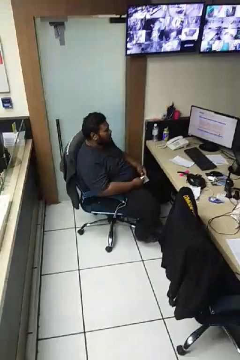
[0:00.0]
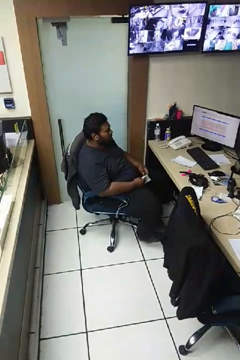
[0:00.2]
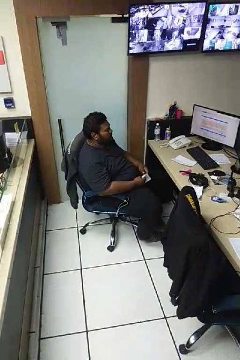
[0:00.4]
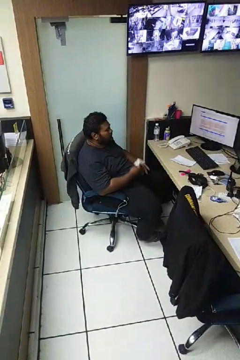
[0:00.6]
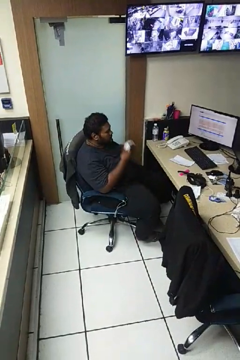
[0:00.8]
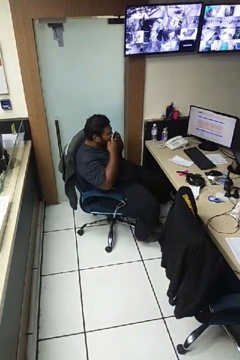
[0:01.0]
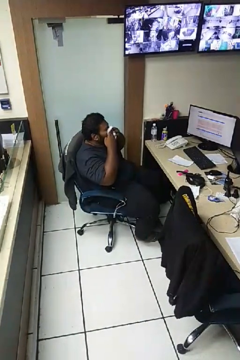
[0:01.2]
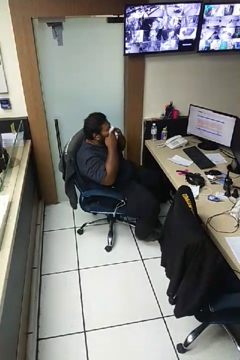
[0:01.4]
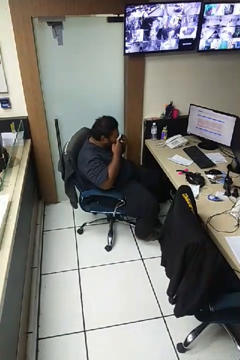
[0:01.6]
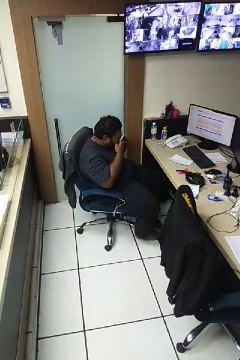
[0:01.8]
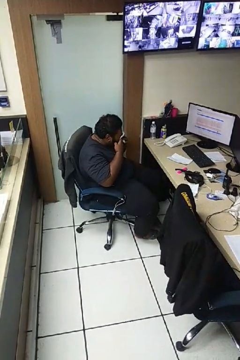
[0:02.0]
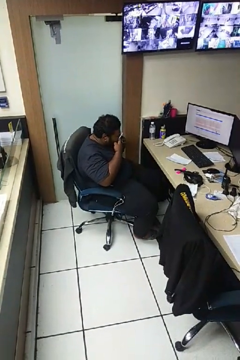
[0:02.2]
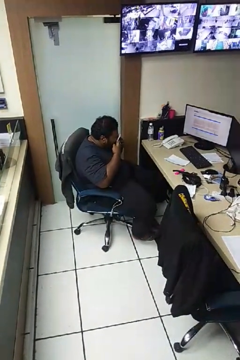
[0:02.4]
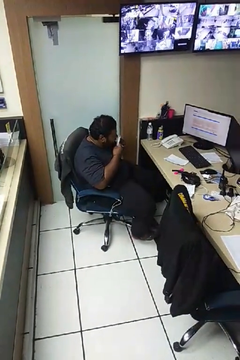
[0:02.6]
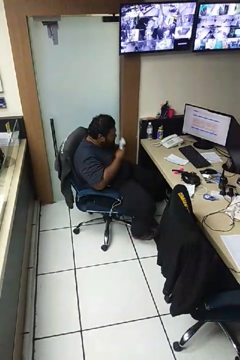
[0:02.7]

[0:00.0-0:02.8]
person blows nose

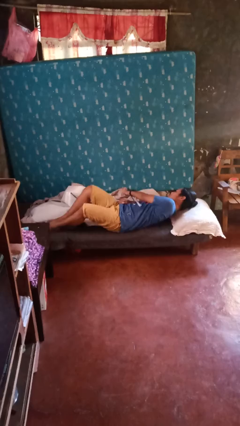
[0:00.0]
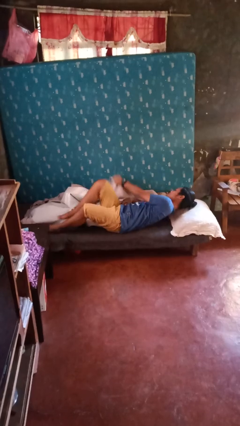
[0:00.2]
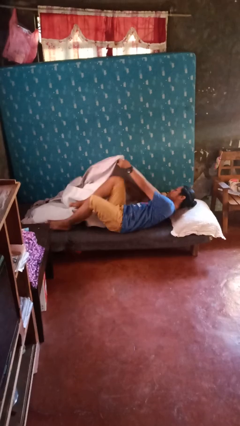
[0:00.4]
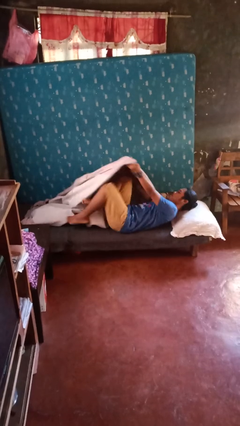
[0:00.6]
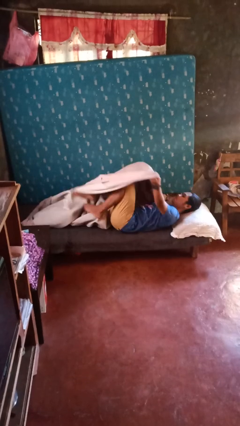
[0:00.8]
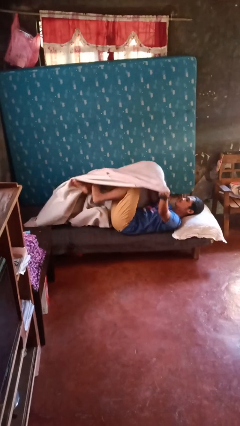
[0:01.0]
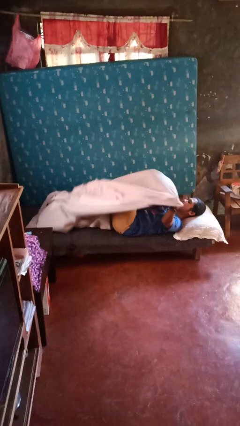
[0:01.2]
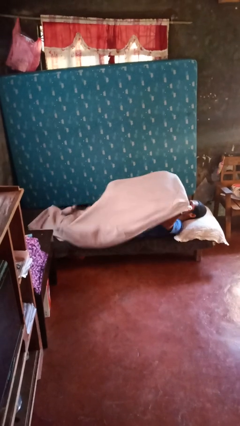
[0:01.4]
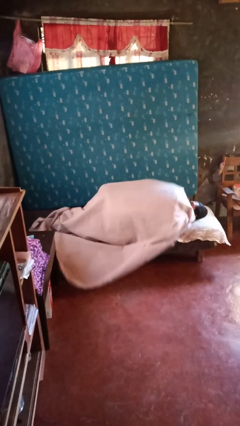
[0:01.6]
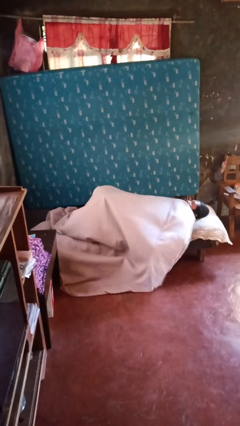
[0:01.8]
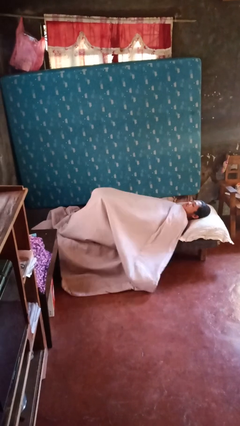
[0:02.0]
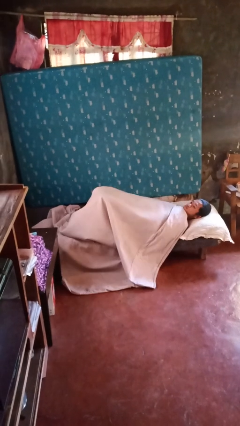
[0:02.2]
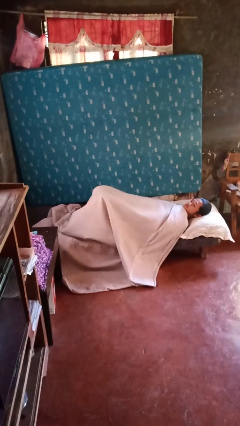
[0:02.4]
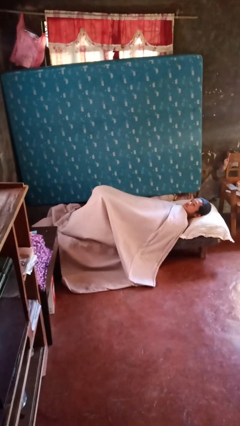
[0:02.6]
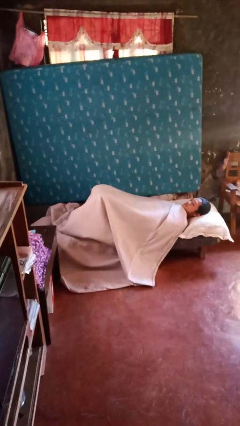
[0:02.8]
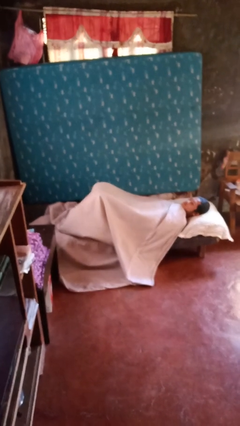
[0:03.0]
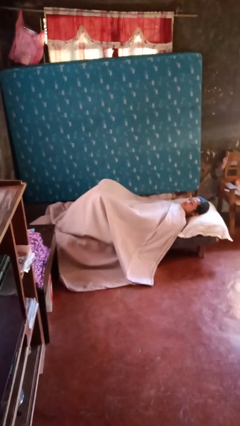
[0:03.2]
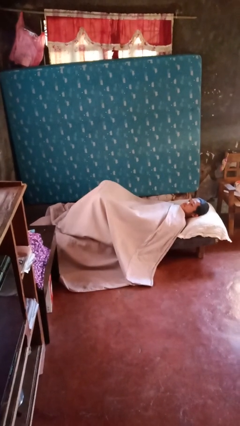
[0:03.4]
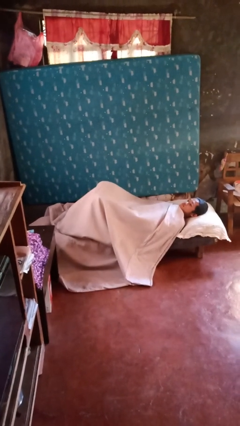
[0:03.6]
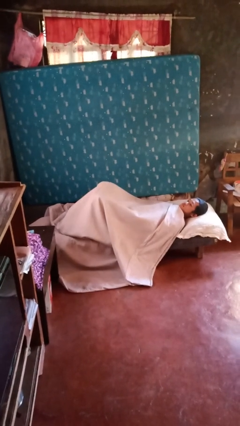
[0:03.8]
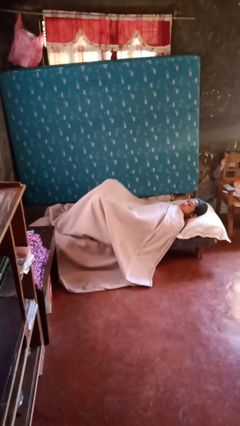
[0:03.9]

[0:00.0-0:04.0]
person covers with bedsheets

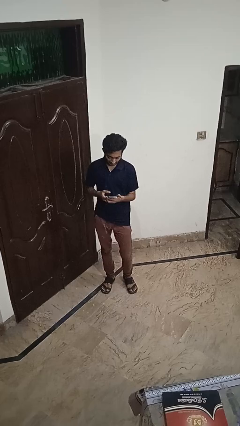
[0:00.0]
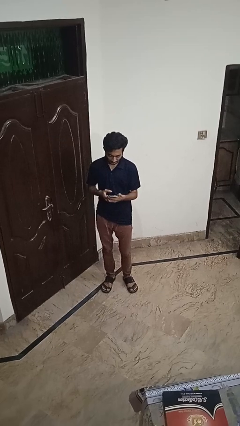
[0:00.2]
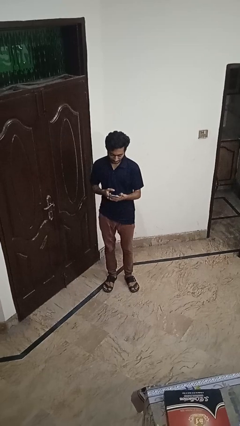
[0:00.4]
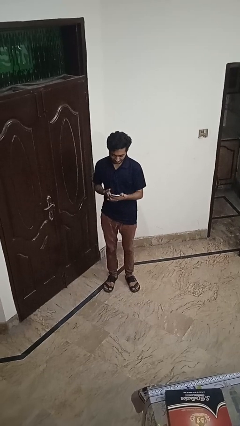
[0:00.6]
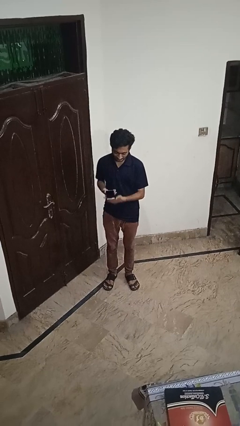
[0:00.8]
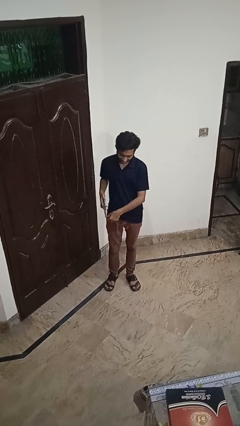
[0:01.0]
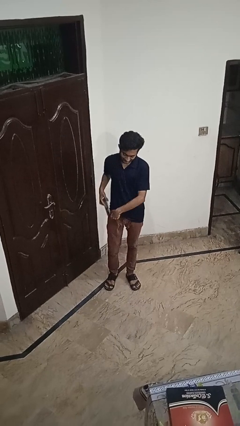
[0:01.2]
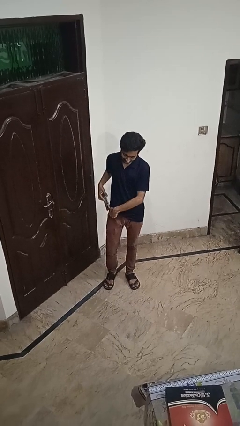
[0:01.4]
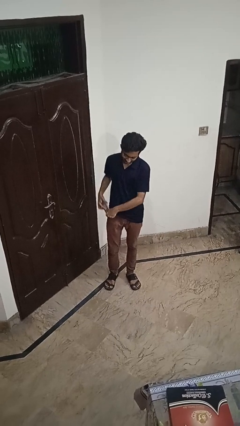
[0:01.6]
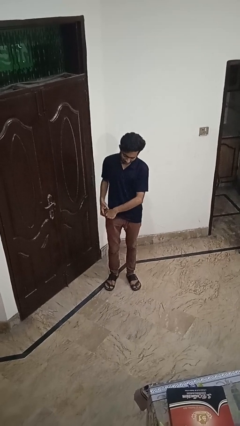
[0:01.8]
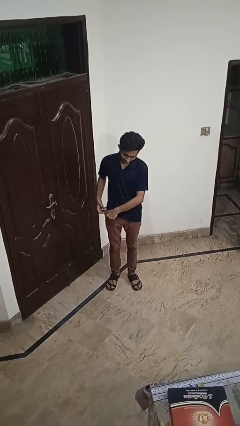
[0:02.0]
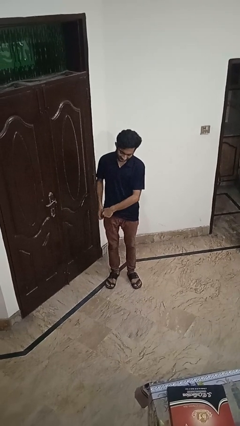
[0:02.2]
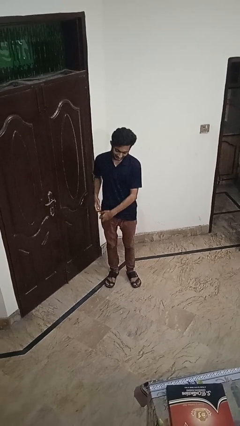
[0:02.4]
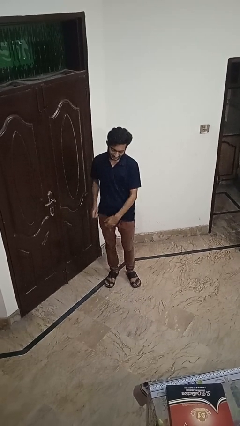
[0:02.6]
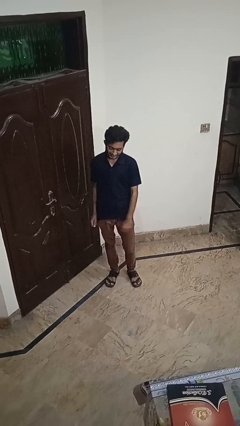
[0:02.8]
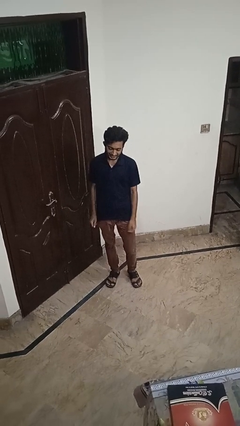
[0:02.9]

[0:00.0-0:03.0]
person puts phone into pocket

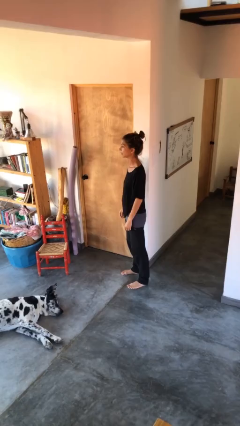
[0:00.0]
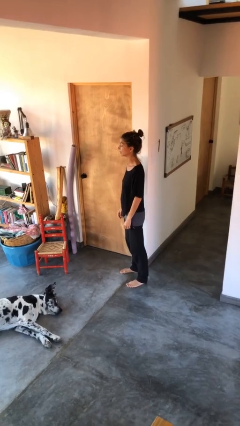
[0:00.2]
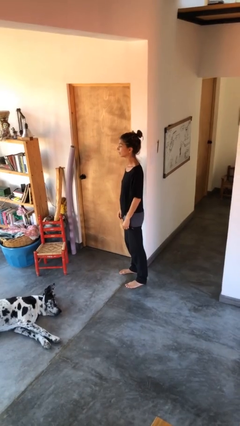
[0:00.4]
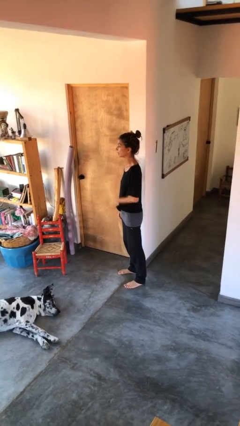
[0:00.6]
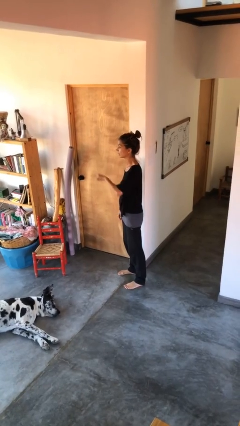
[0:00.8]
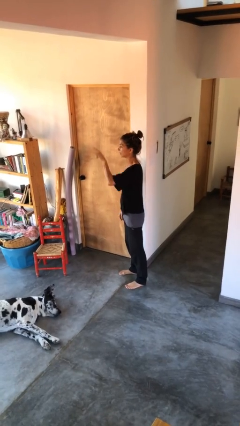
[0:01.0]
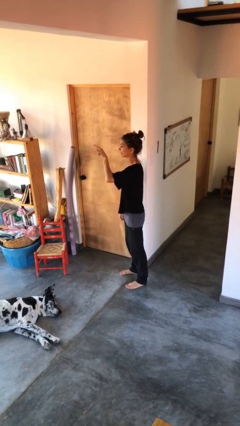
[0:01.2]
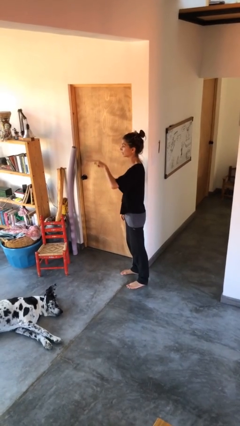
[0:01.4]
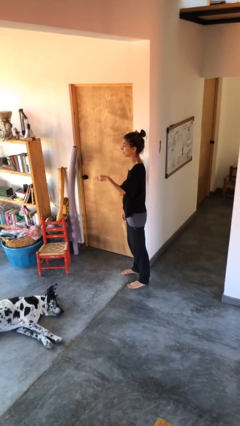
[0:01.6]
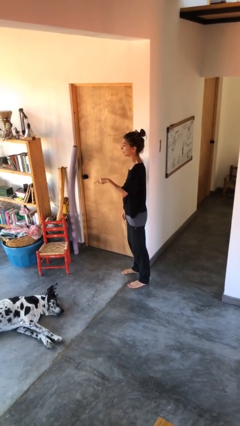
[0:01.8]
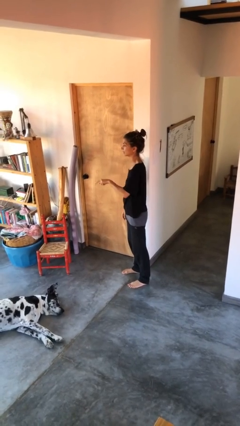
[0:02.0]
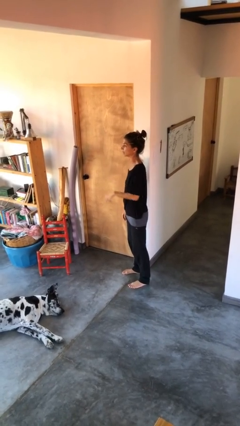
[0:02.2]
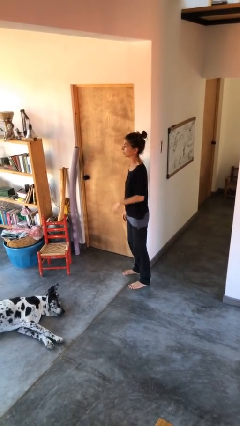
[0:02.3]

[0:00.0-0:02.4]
person gestures swipe down

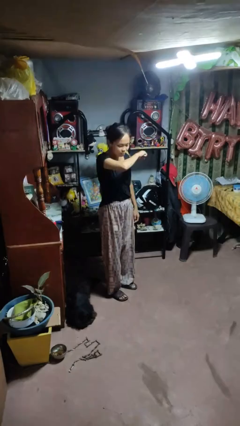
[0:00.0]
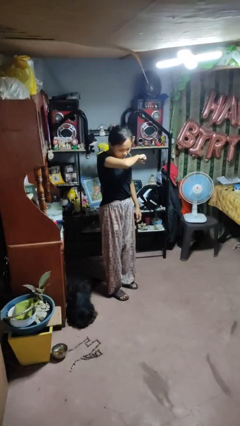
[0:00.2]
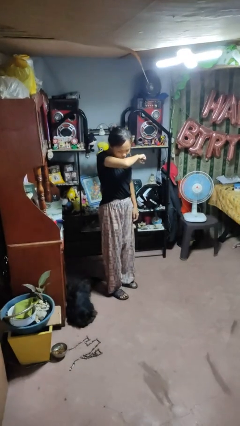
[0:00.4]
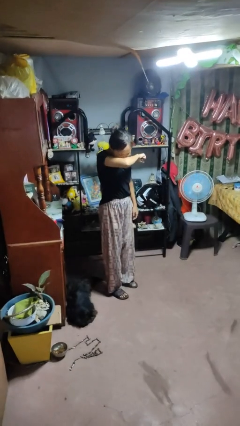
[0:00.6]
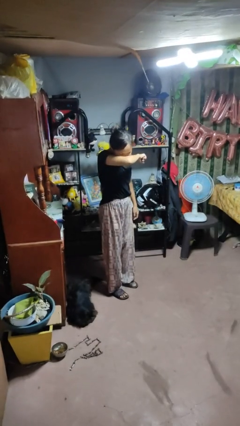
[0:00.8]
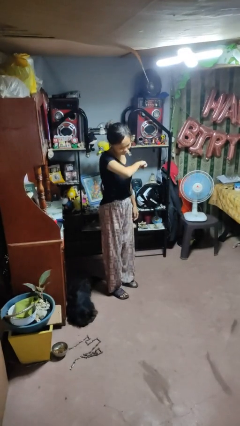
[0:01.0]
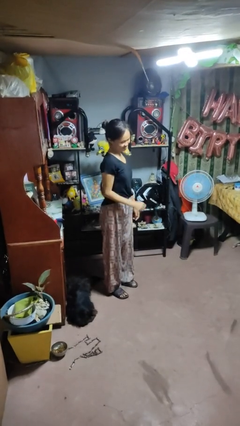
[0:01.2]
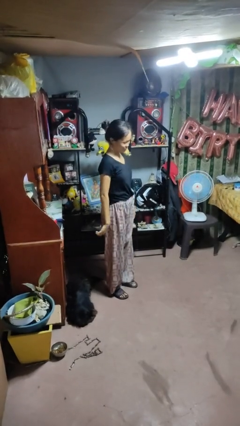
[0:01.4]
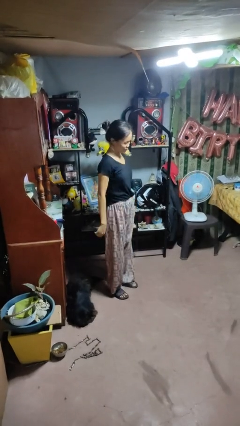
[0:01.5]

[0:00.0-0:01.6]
person sneezes into arm

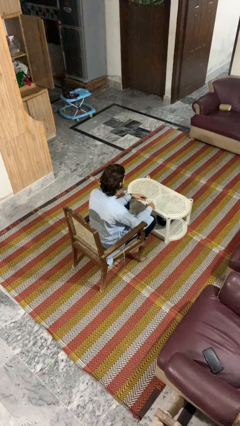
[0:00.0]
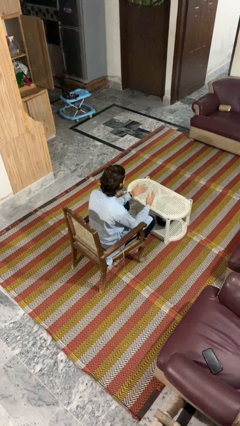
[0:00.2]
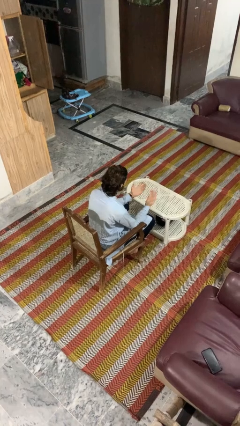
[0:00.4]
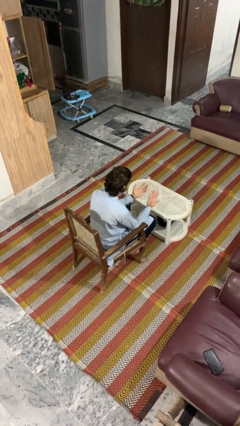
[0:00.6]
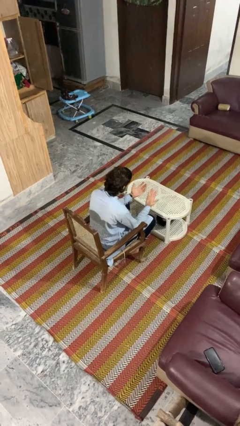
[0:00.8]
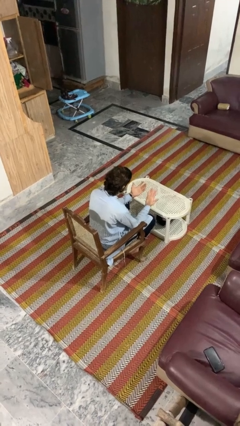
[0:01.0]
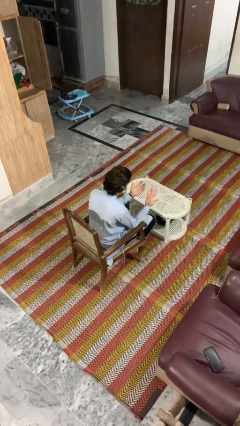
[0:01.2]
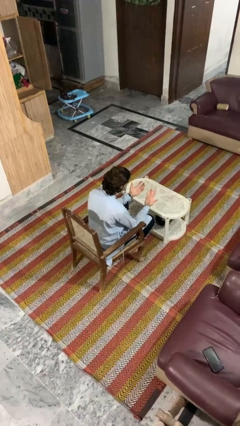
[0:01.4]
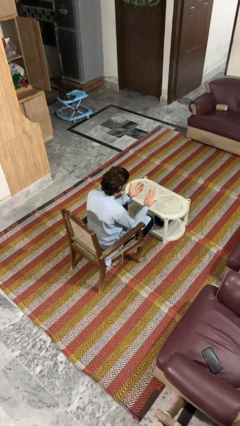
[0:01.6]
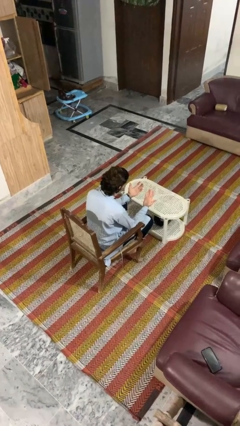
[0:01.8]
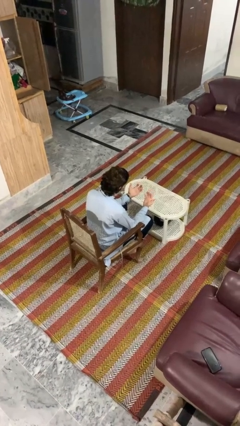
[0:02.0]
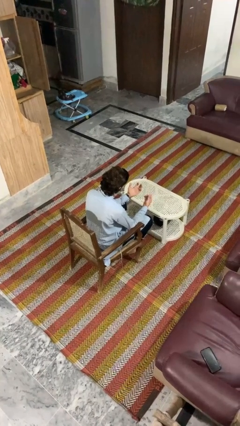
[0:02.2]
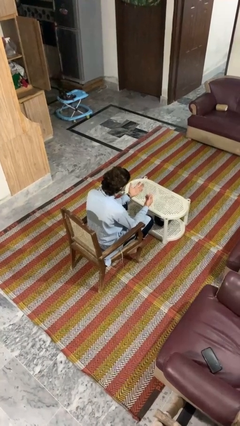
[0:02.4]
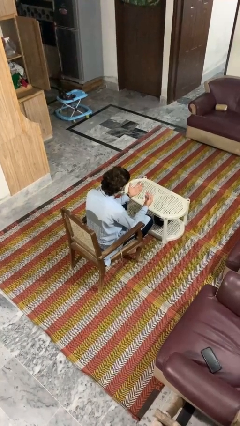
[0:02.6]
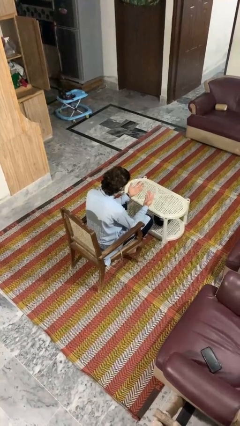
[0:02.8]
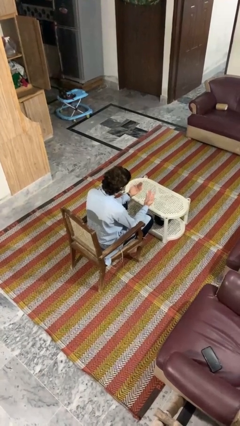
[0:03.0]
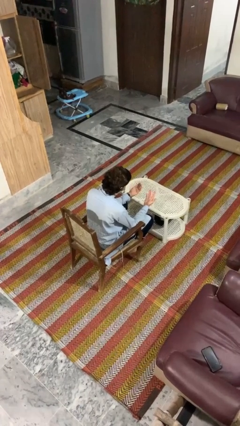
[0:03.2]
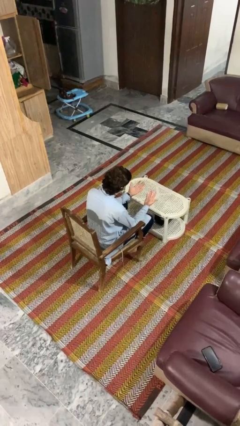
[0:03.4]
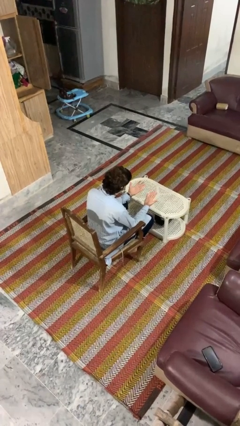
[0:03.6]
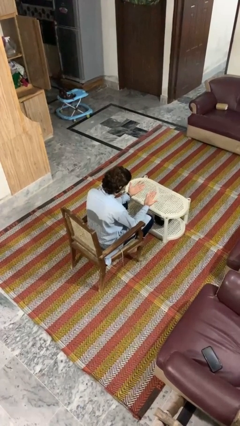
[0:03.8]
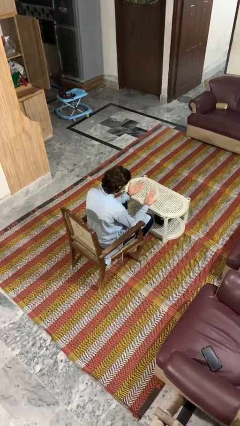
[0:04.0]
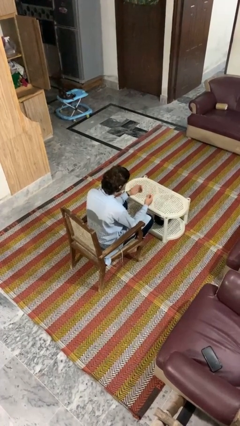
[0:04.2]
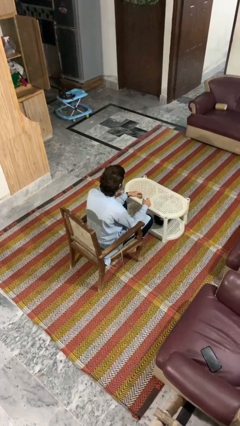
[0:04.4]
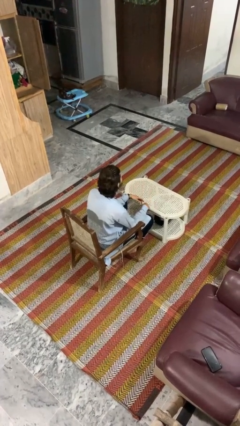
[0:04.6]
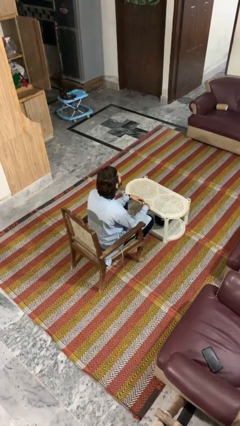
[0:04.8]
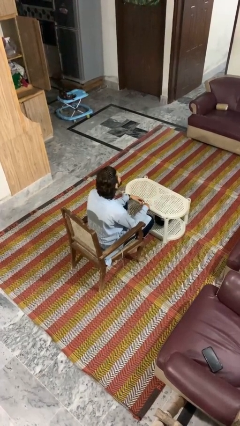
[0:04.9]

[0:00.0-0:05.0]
person looks at hands in lap
